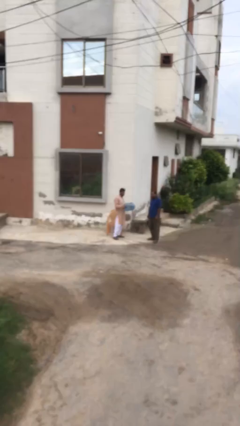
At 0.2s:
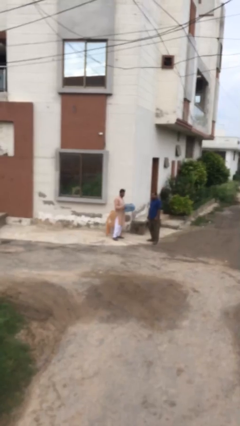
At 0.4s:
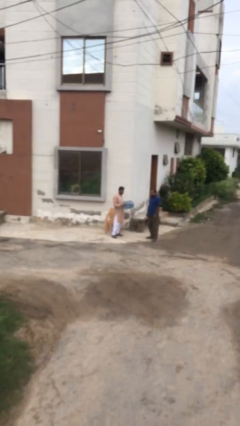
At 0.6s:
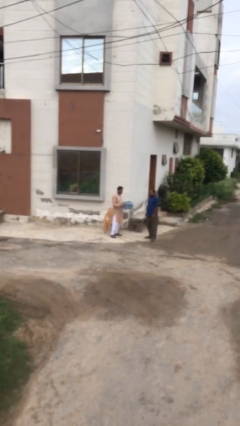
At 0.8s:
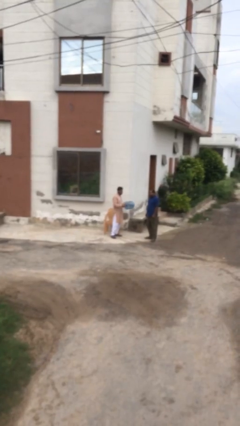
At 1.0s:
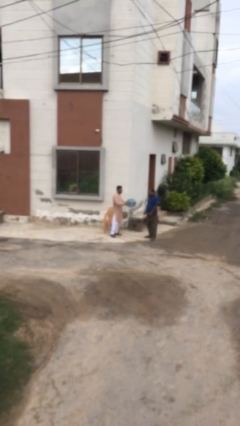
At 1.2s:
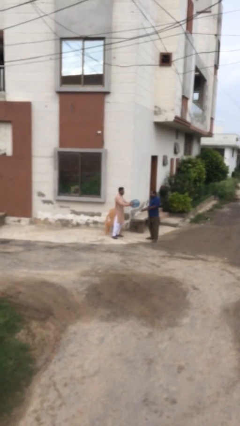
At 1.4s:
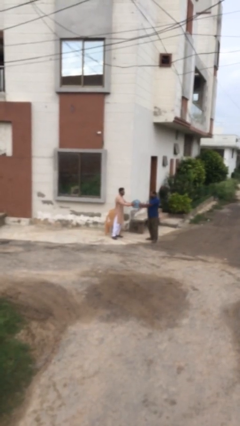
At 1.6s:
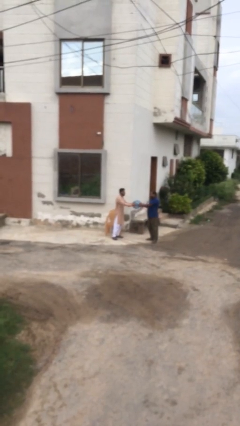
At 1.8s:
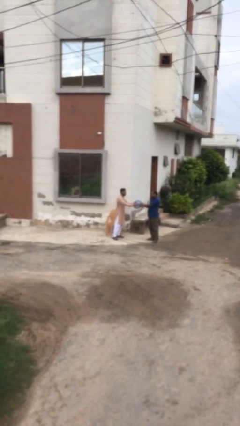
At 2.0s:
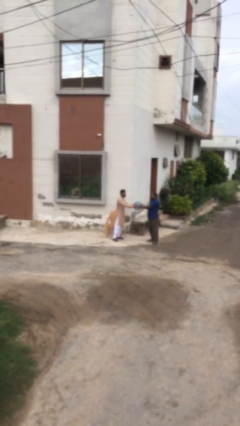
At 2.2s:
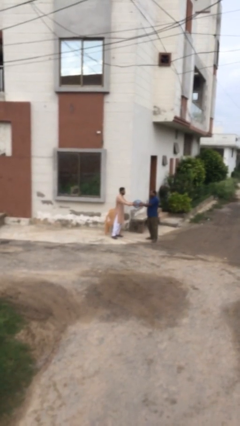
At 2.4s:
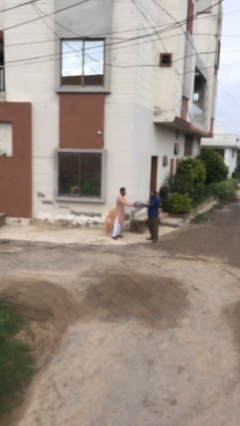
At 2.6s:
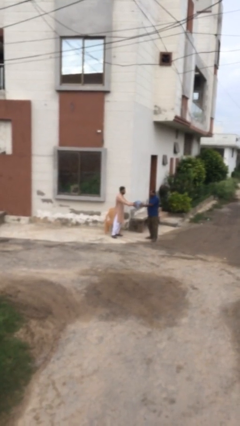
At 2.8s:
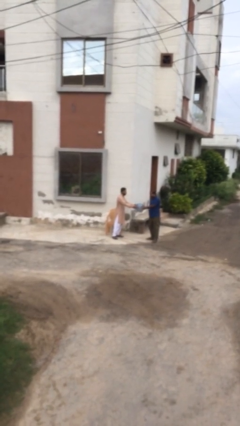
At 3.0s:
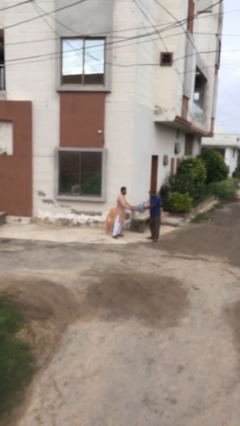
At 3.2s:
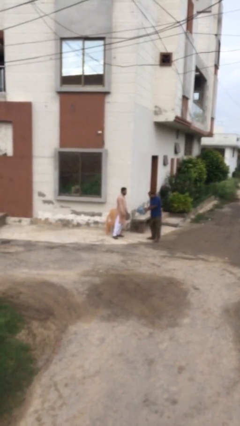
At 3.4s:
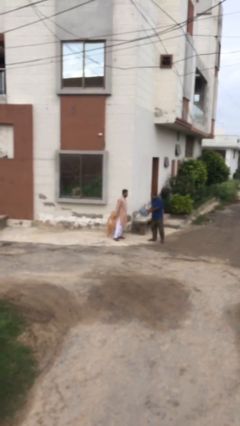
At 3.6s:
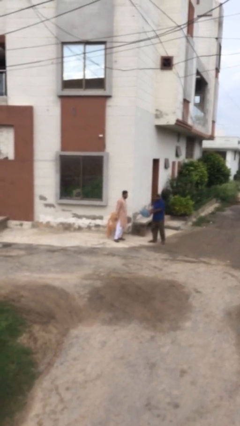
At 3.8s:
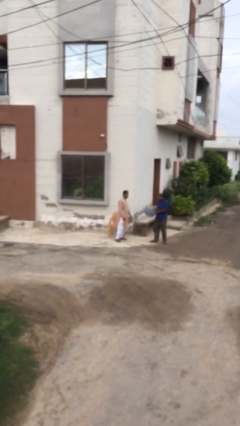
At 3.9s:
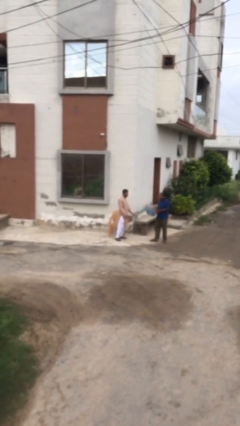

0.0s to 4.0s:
person transfers object to person

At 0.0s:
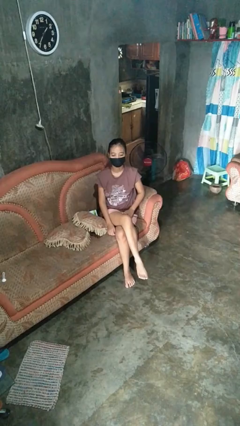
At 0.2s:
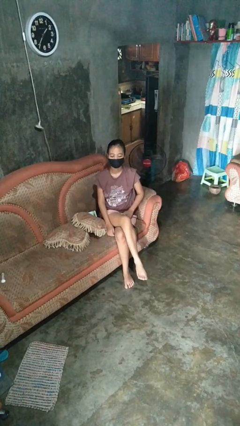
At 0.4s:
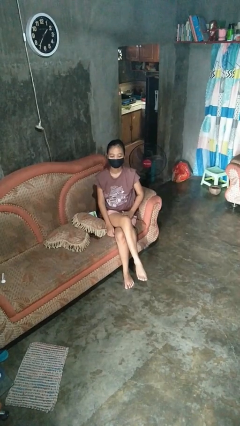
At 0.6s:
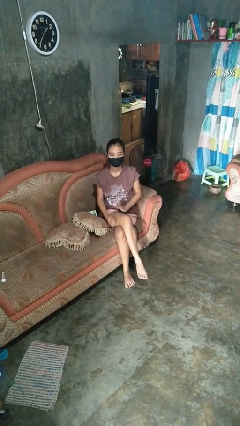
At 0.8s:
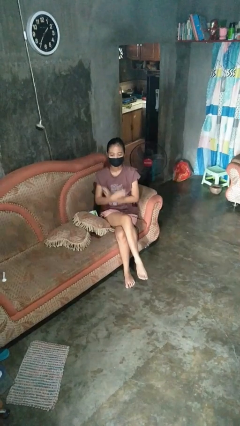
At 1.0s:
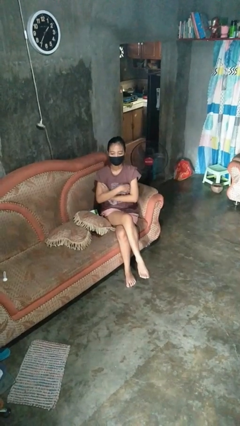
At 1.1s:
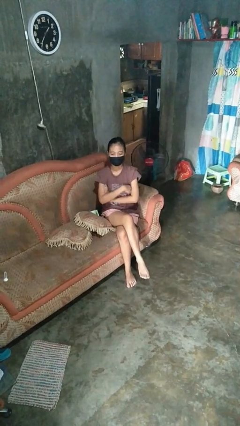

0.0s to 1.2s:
person crosses arms

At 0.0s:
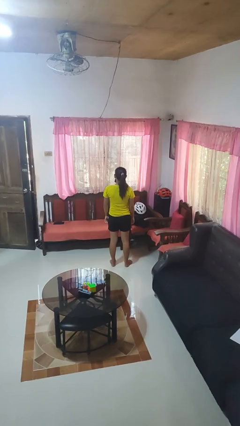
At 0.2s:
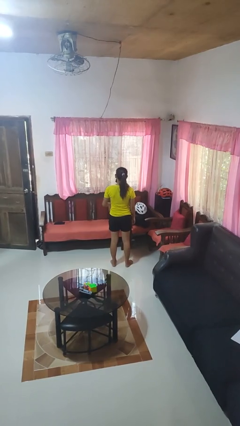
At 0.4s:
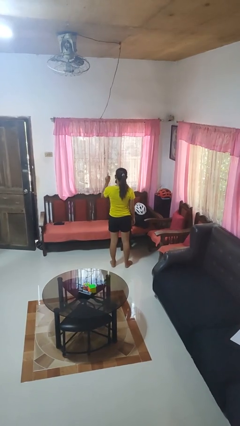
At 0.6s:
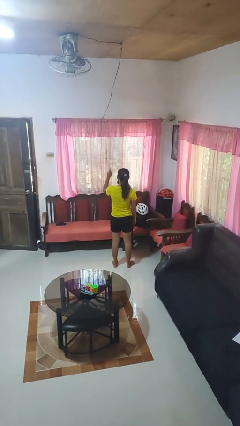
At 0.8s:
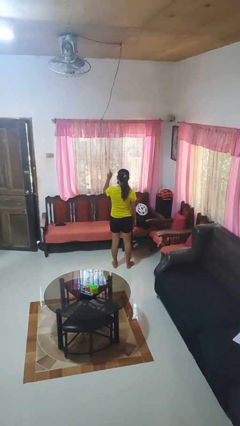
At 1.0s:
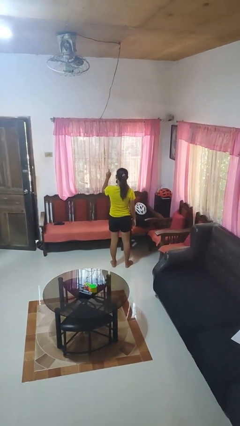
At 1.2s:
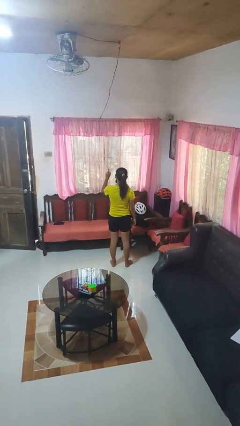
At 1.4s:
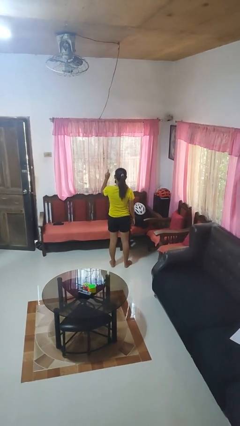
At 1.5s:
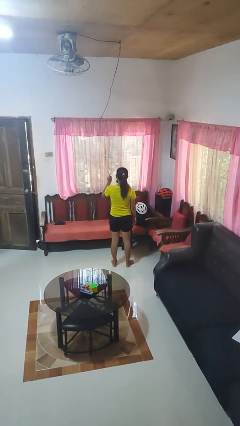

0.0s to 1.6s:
person gestures number one

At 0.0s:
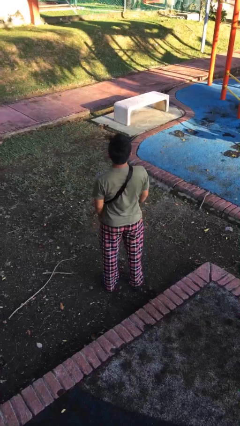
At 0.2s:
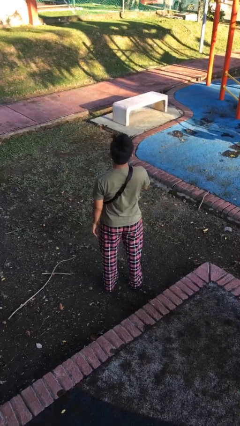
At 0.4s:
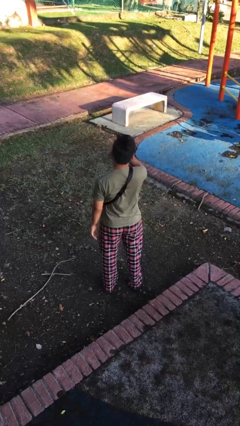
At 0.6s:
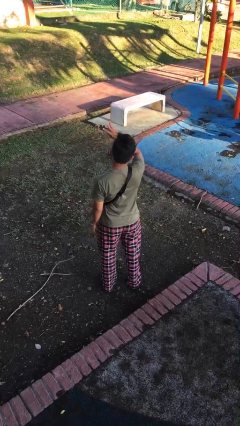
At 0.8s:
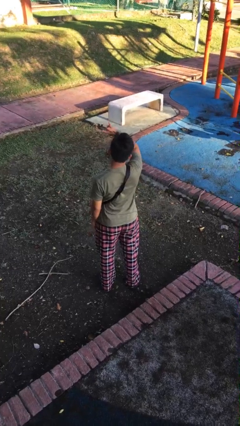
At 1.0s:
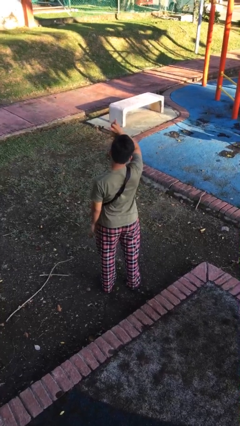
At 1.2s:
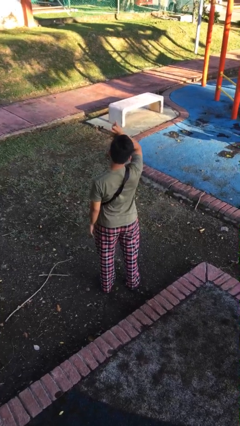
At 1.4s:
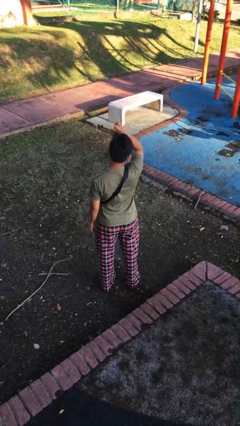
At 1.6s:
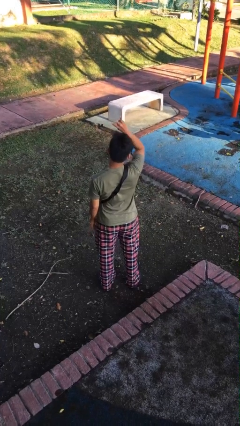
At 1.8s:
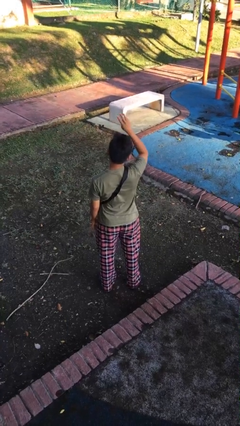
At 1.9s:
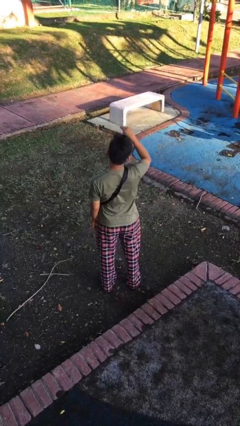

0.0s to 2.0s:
person gestures number three

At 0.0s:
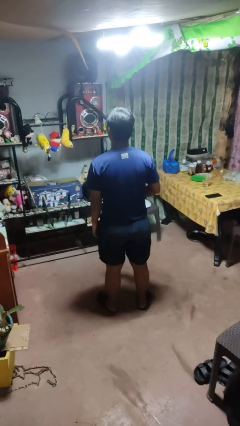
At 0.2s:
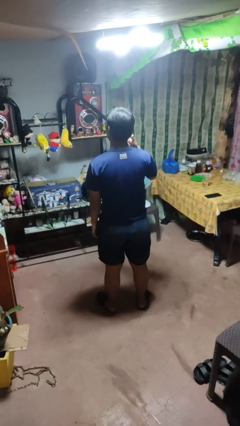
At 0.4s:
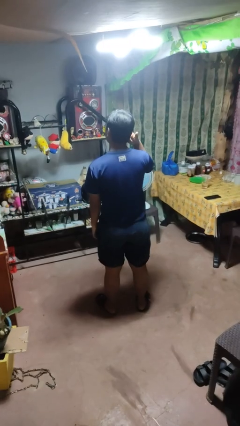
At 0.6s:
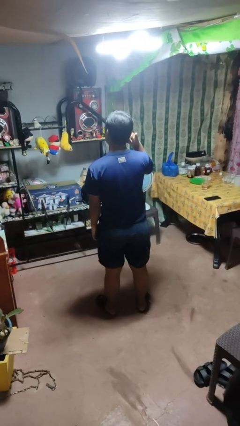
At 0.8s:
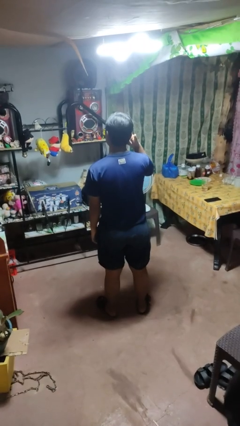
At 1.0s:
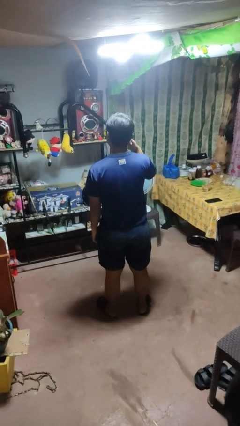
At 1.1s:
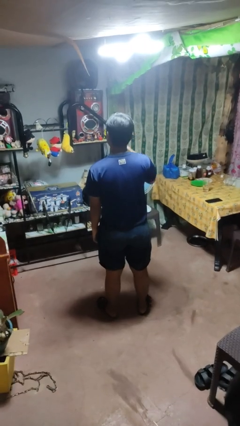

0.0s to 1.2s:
person gestures call me

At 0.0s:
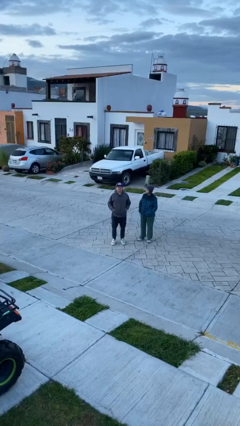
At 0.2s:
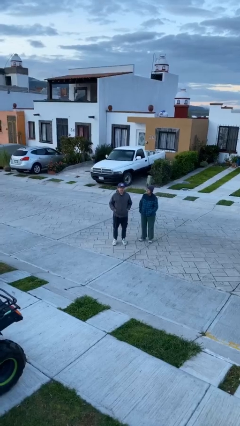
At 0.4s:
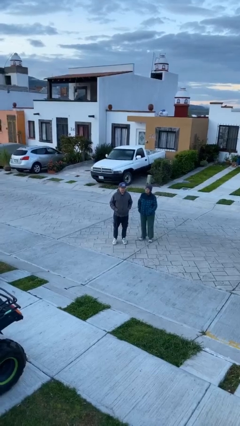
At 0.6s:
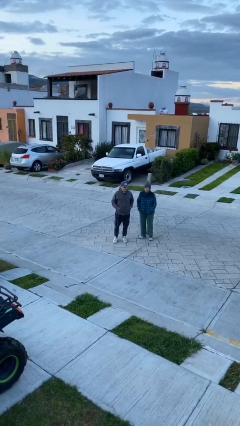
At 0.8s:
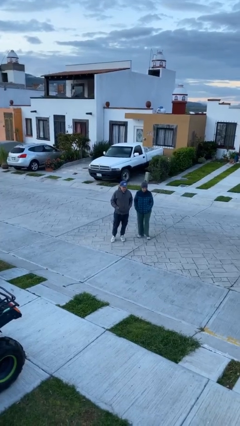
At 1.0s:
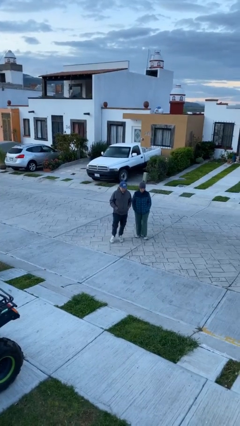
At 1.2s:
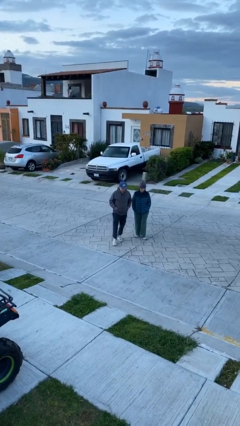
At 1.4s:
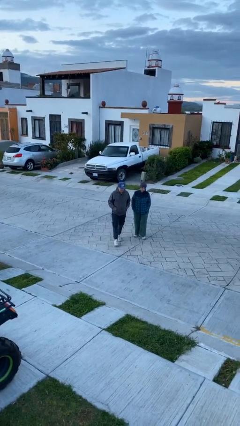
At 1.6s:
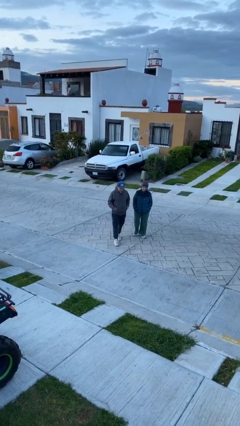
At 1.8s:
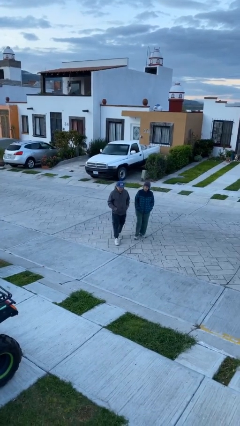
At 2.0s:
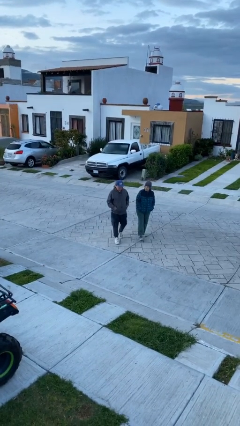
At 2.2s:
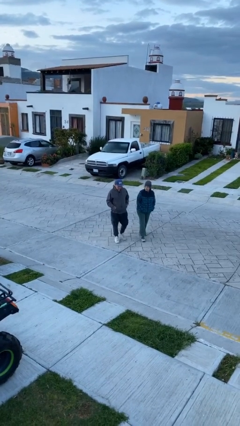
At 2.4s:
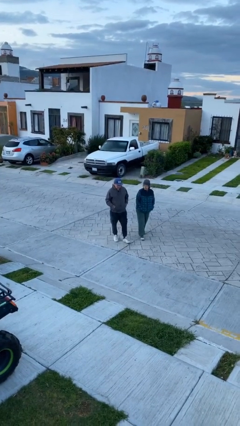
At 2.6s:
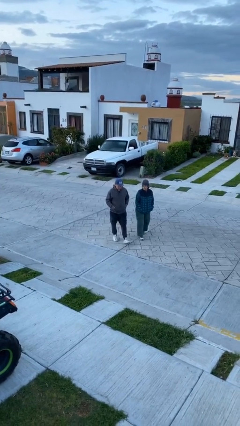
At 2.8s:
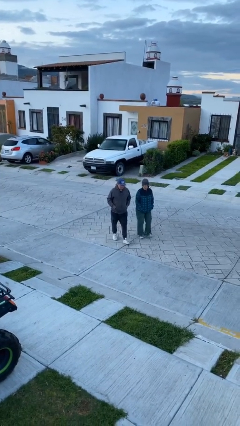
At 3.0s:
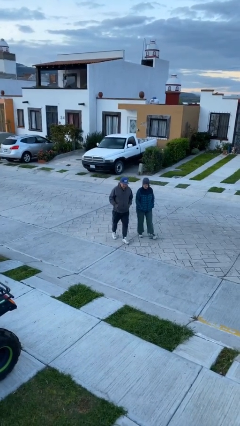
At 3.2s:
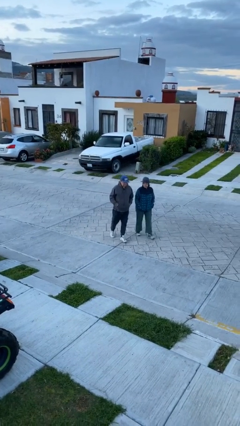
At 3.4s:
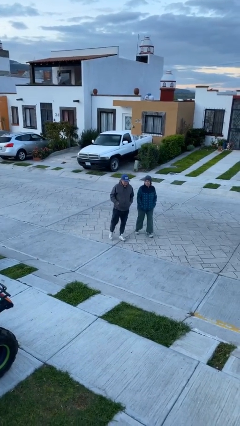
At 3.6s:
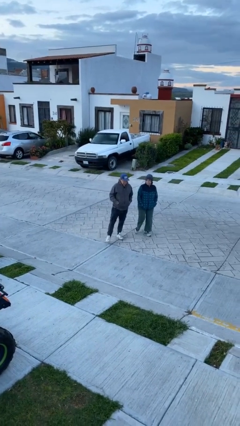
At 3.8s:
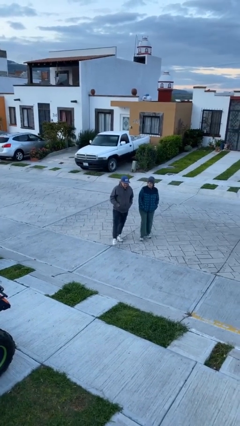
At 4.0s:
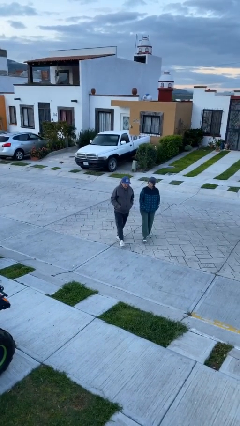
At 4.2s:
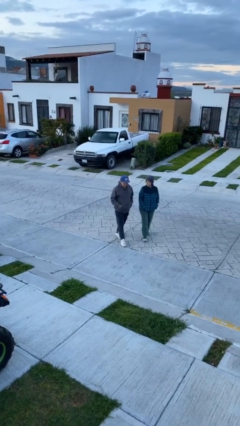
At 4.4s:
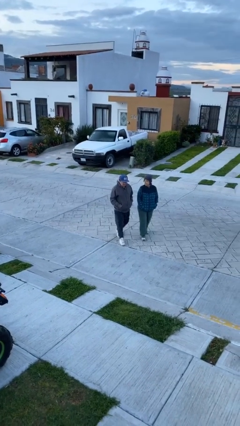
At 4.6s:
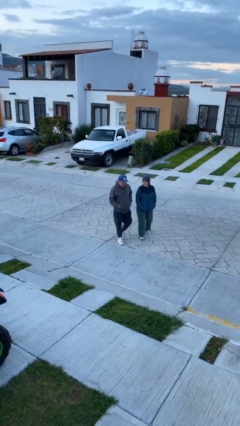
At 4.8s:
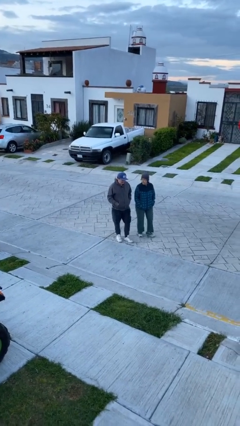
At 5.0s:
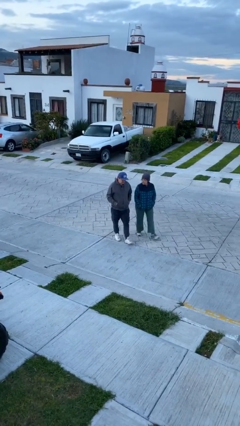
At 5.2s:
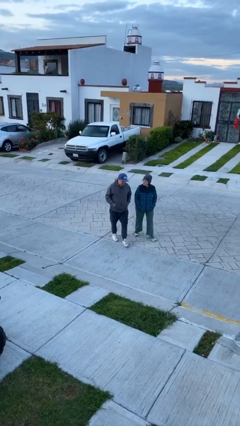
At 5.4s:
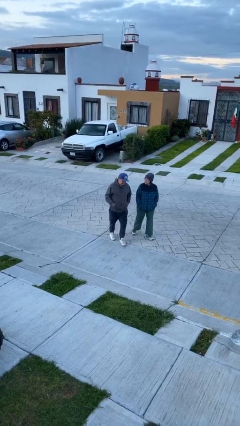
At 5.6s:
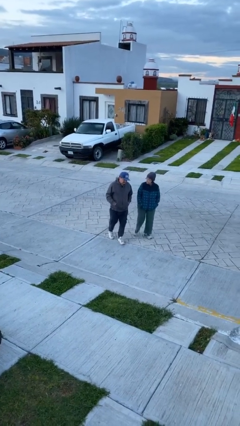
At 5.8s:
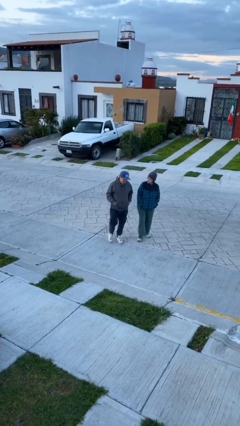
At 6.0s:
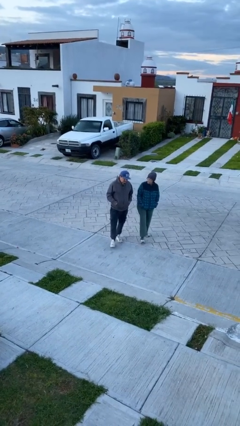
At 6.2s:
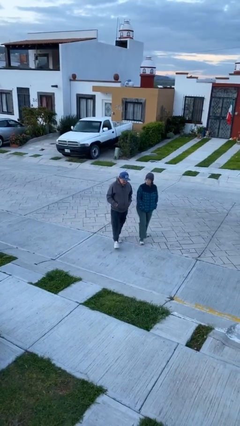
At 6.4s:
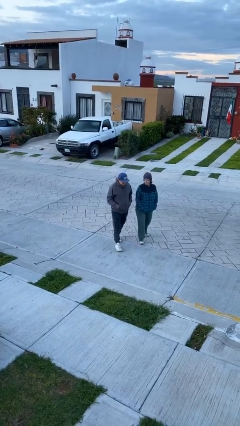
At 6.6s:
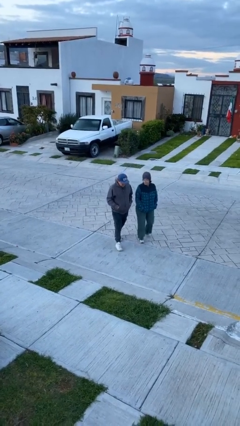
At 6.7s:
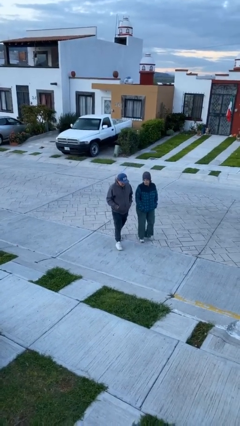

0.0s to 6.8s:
person talks to person

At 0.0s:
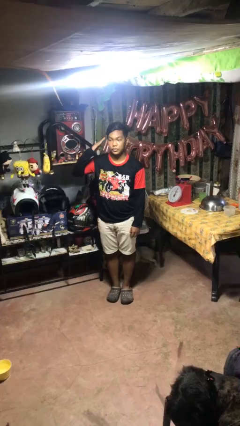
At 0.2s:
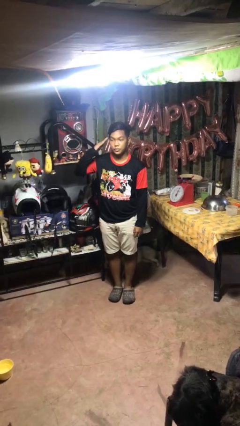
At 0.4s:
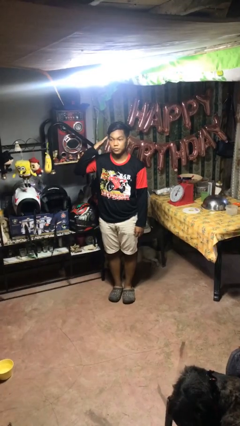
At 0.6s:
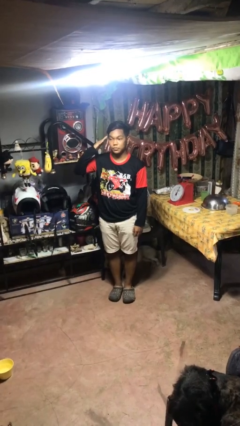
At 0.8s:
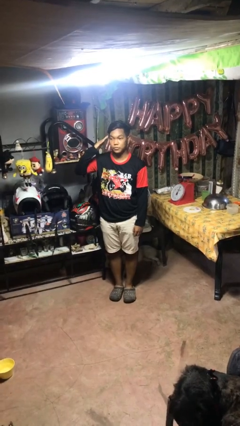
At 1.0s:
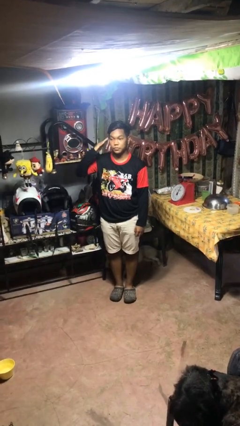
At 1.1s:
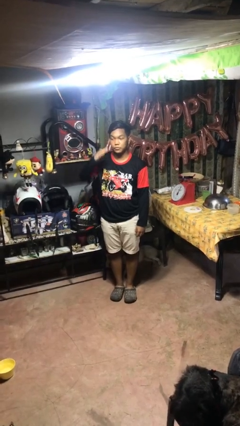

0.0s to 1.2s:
person salutes
